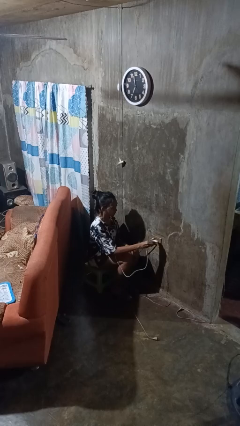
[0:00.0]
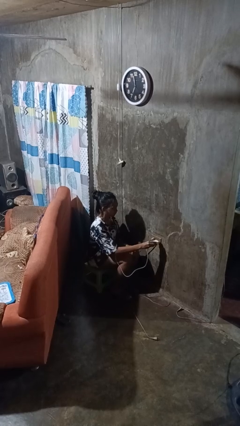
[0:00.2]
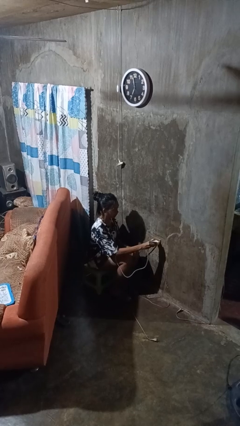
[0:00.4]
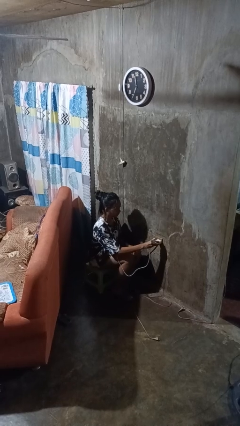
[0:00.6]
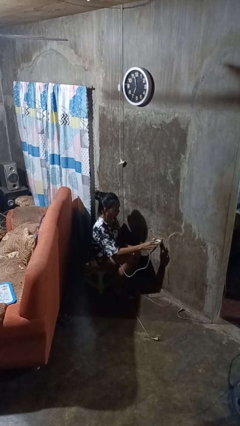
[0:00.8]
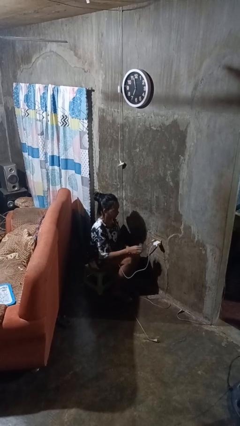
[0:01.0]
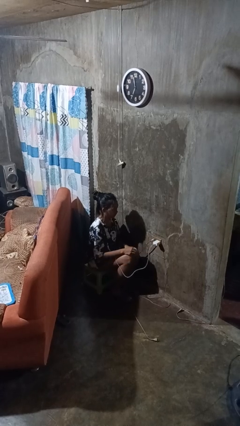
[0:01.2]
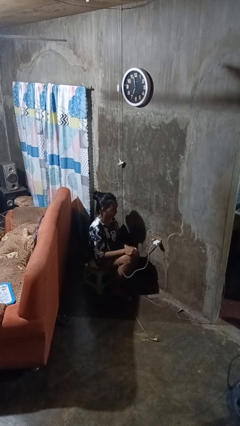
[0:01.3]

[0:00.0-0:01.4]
person plugs into electrical socket

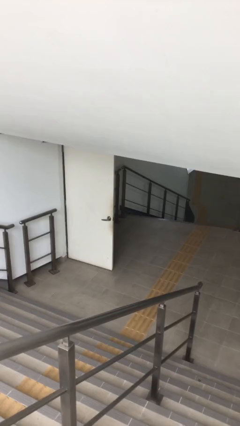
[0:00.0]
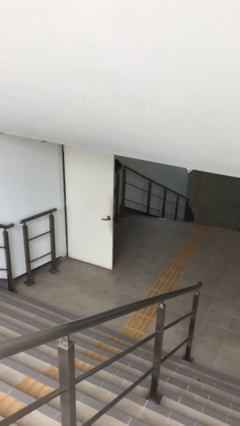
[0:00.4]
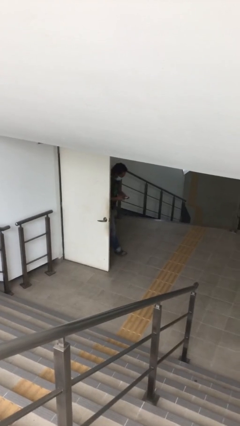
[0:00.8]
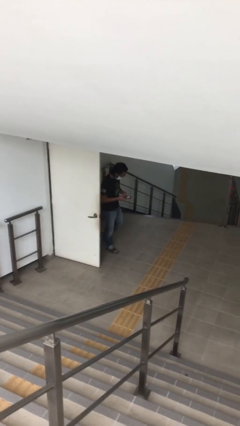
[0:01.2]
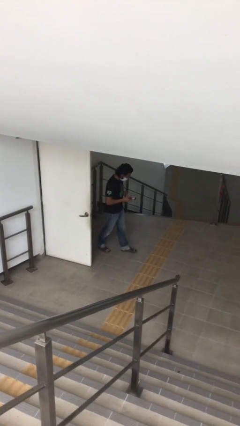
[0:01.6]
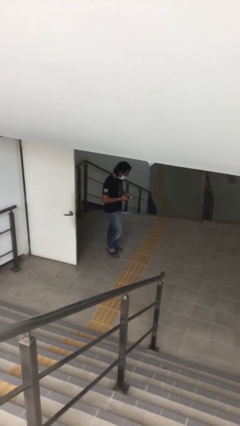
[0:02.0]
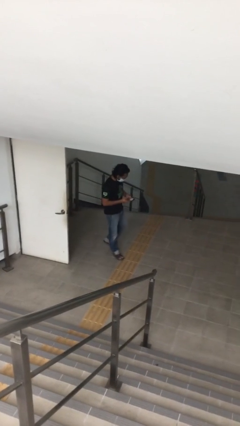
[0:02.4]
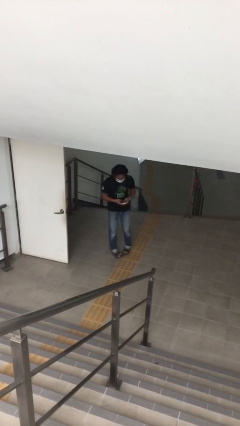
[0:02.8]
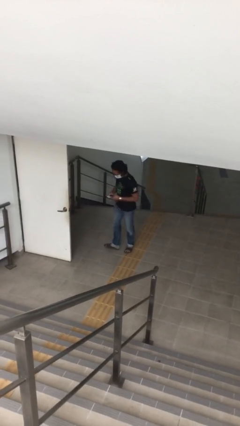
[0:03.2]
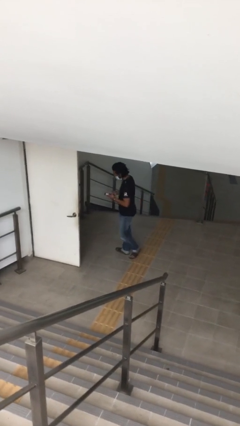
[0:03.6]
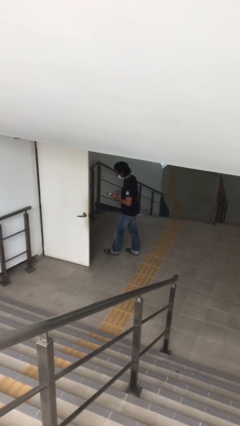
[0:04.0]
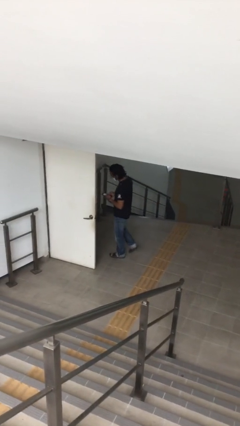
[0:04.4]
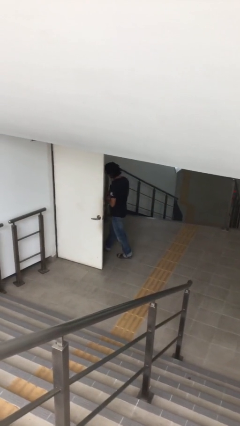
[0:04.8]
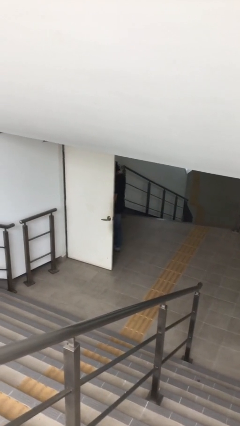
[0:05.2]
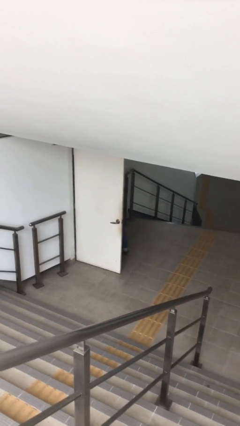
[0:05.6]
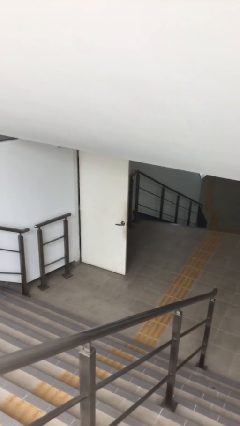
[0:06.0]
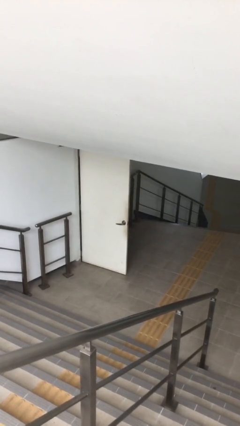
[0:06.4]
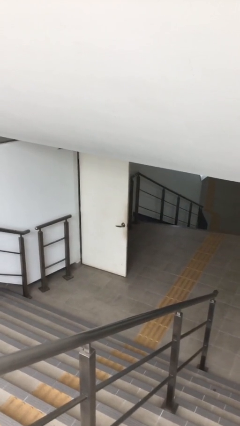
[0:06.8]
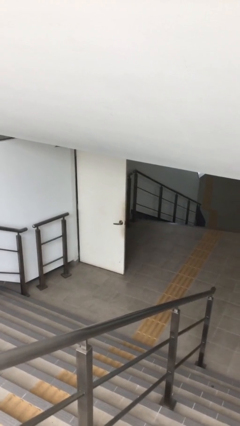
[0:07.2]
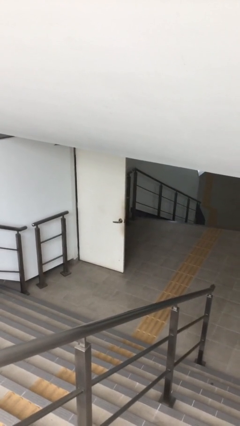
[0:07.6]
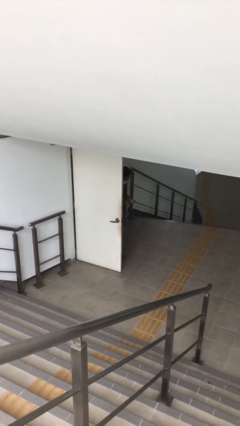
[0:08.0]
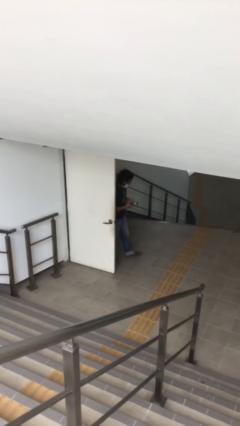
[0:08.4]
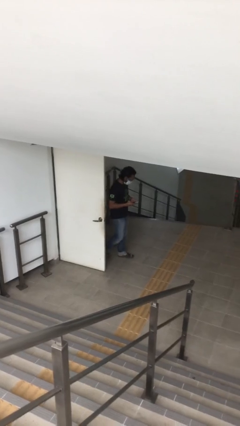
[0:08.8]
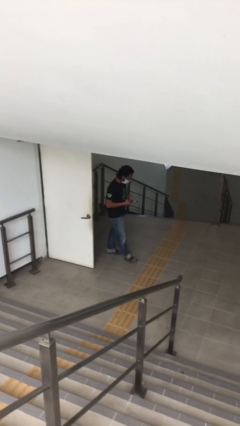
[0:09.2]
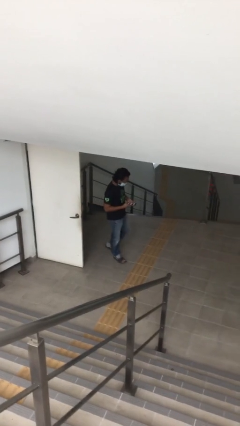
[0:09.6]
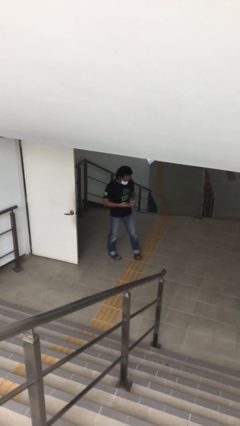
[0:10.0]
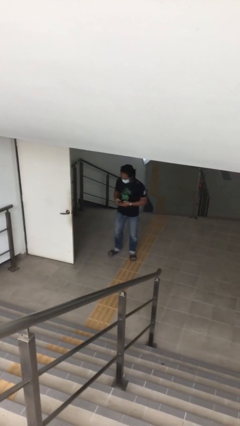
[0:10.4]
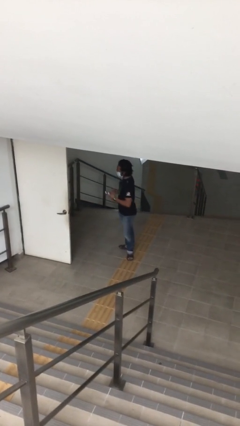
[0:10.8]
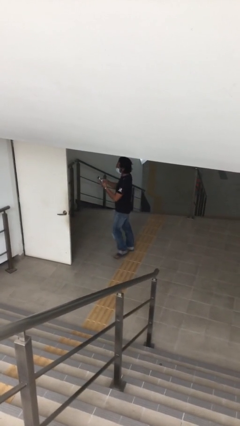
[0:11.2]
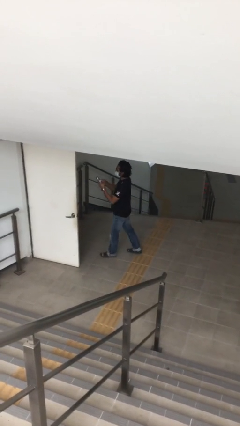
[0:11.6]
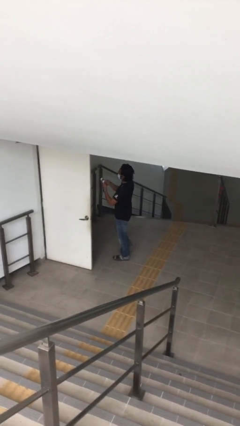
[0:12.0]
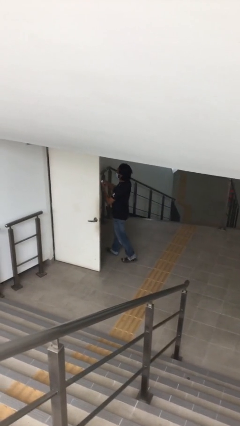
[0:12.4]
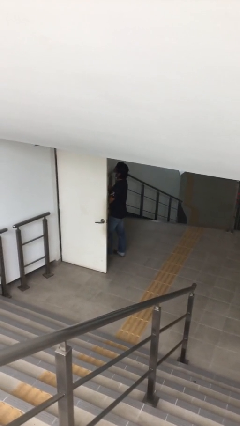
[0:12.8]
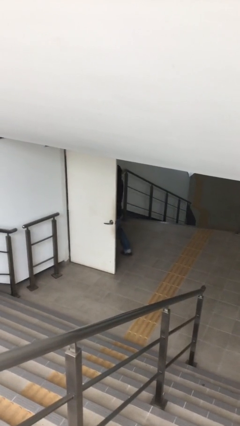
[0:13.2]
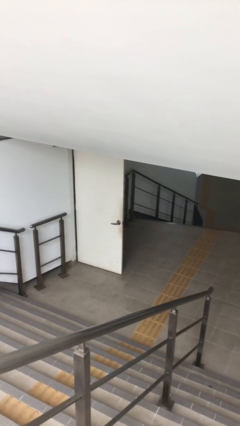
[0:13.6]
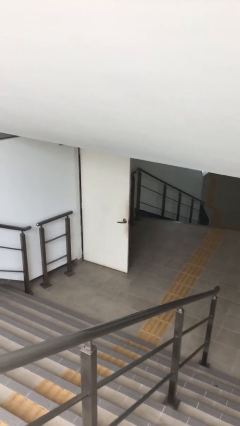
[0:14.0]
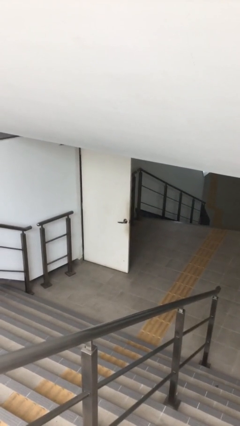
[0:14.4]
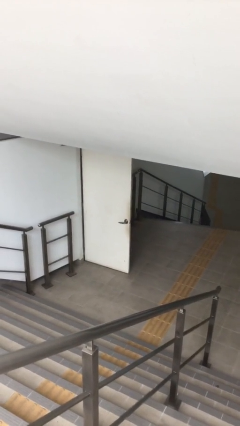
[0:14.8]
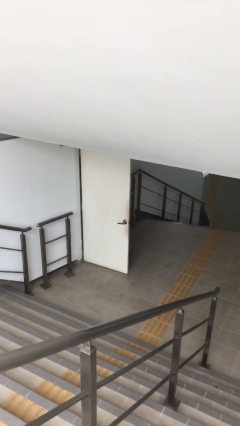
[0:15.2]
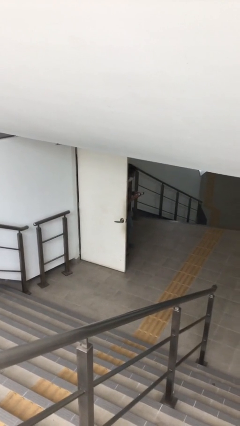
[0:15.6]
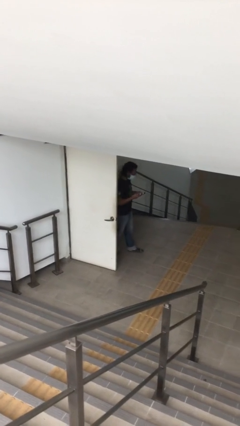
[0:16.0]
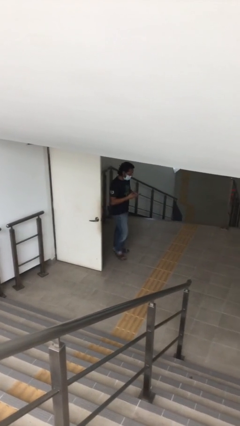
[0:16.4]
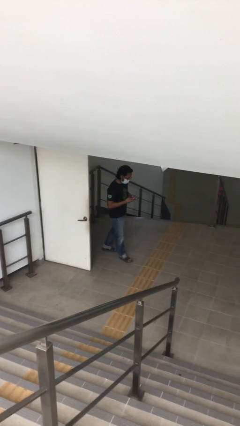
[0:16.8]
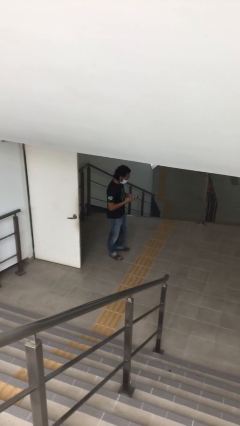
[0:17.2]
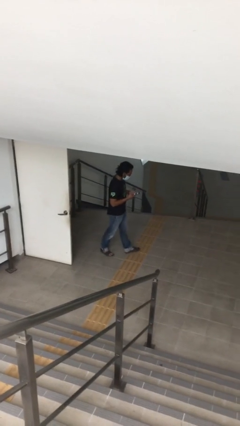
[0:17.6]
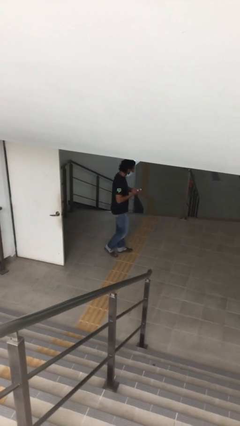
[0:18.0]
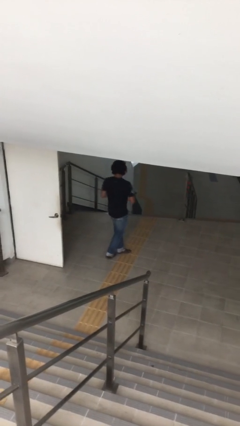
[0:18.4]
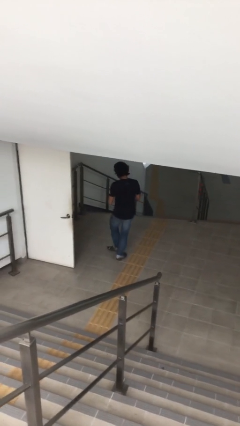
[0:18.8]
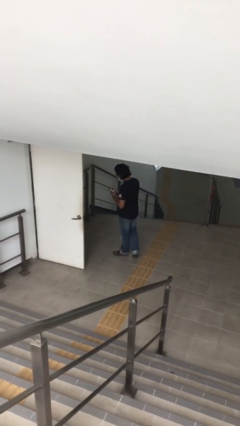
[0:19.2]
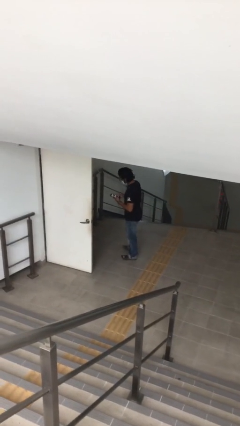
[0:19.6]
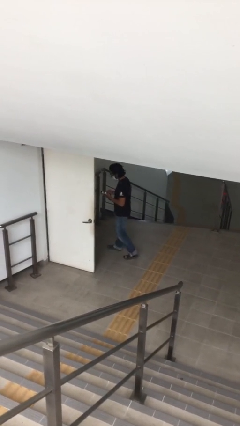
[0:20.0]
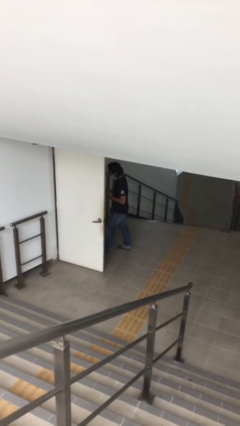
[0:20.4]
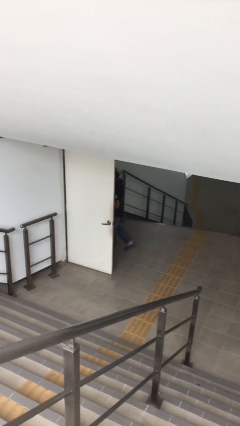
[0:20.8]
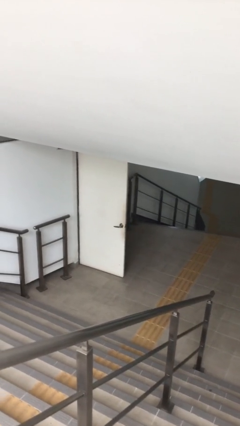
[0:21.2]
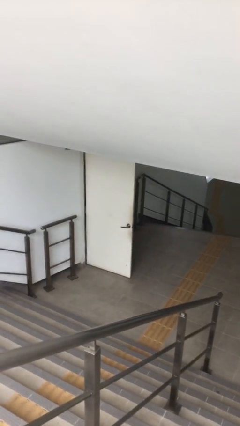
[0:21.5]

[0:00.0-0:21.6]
person texts on phone

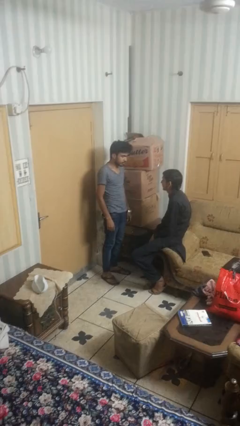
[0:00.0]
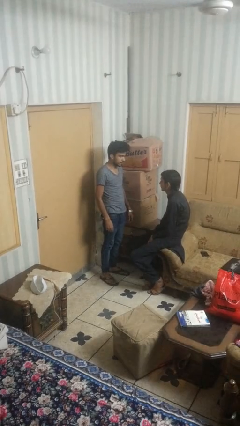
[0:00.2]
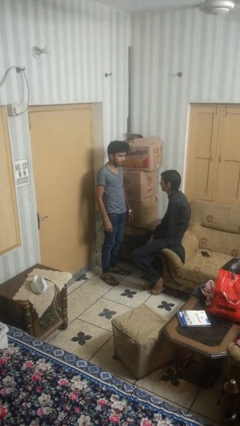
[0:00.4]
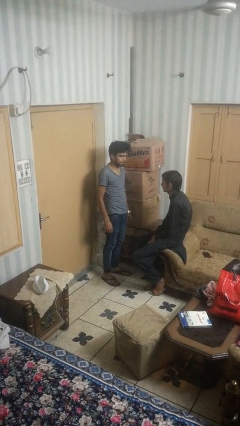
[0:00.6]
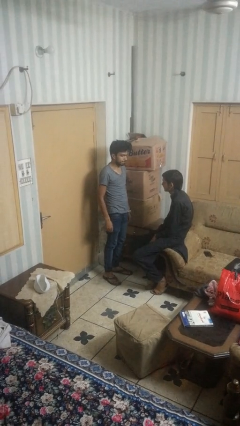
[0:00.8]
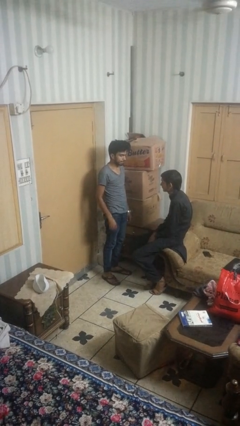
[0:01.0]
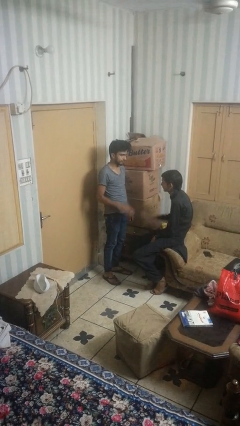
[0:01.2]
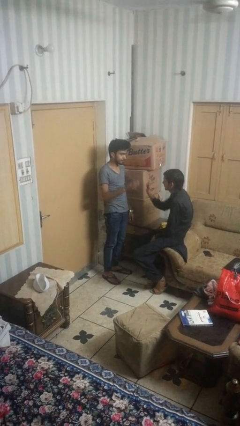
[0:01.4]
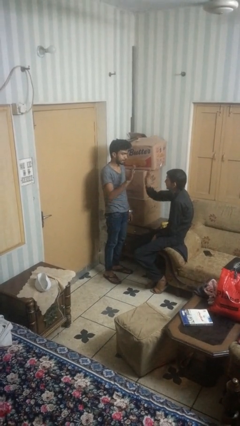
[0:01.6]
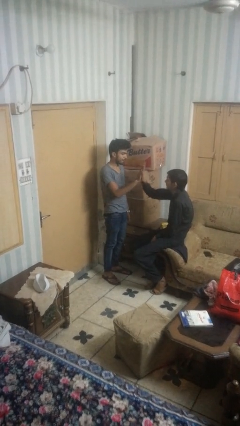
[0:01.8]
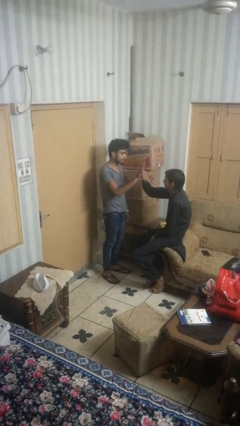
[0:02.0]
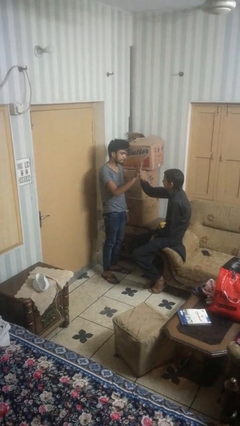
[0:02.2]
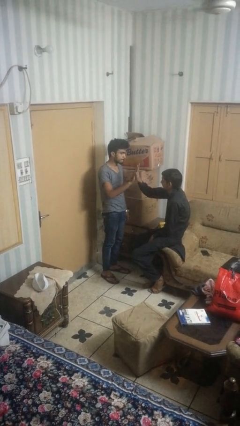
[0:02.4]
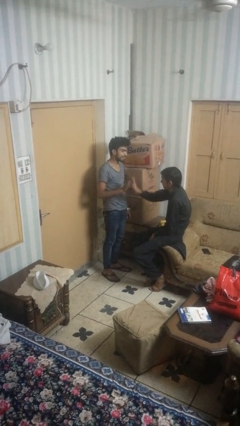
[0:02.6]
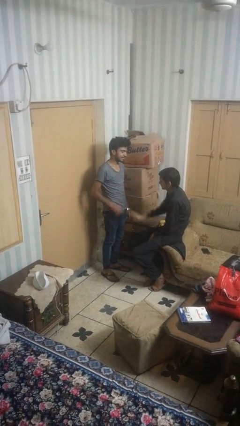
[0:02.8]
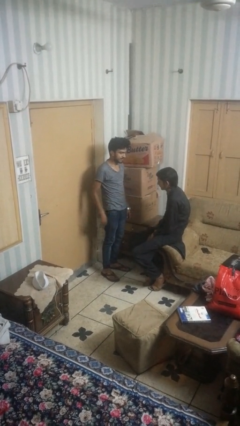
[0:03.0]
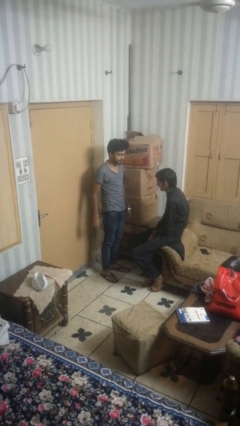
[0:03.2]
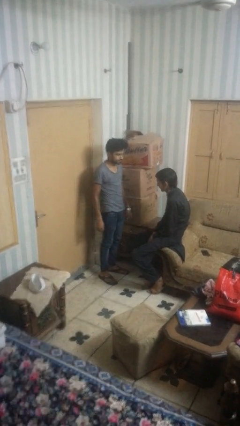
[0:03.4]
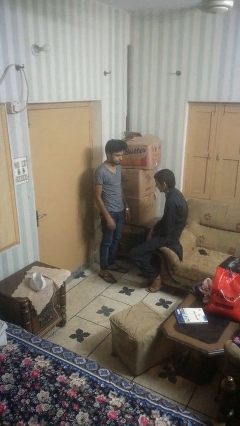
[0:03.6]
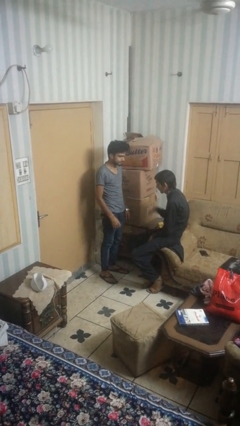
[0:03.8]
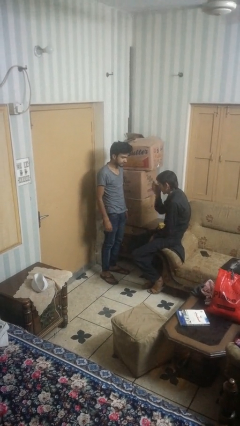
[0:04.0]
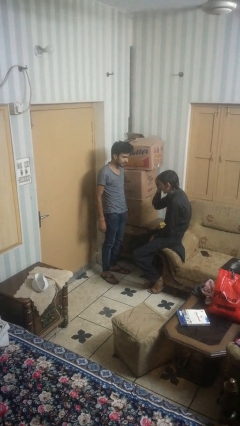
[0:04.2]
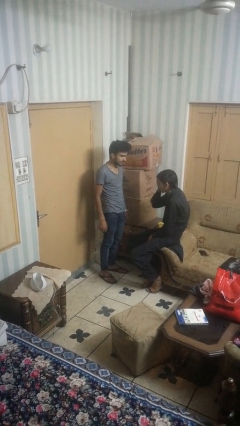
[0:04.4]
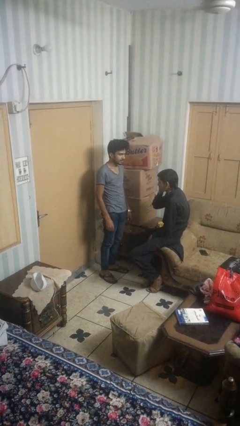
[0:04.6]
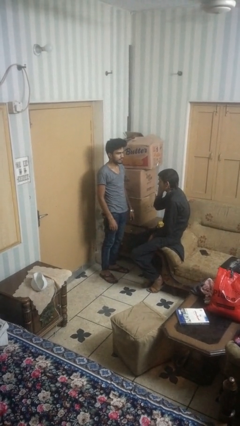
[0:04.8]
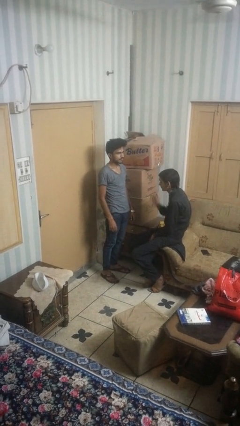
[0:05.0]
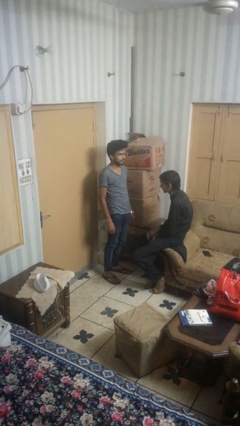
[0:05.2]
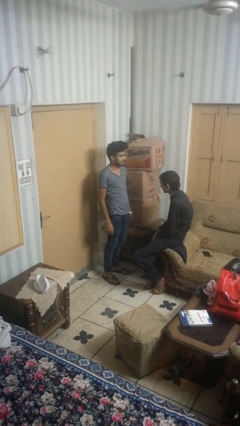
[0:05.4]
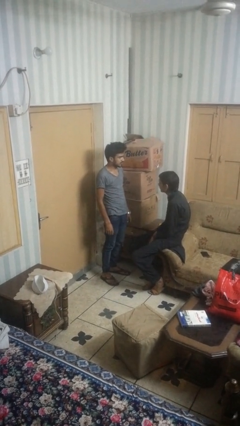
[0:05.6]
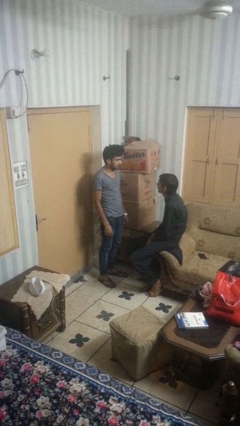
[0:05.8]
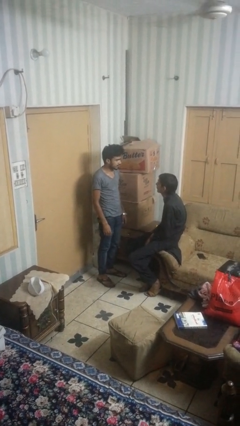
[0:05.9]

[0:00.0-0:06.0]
person highfives hand
